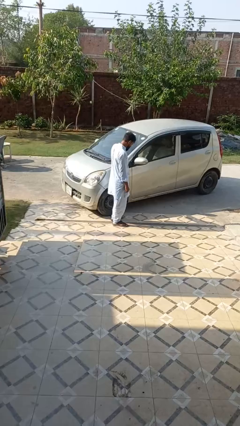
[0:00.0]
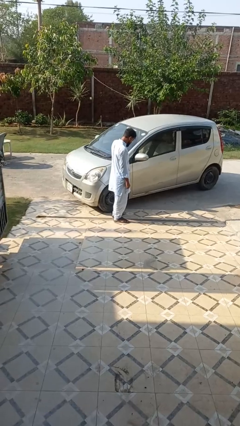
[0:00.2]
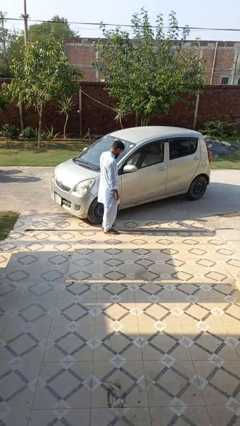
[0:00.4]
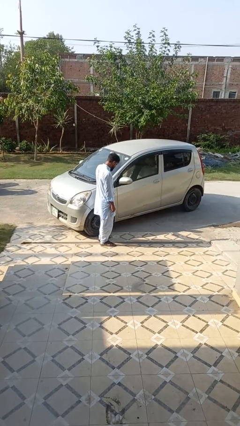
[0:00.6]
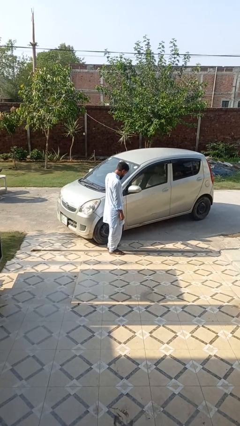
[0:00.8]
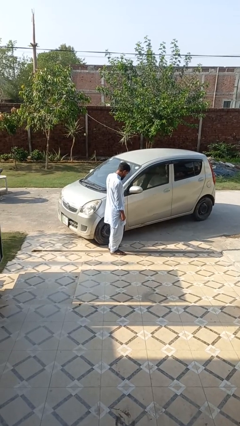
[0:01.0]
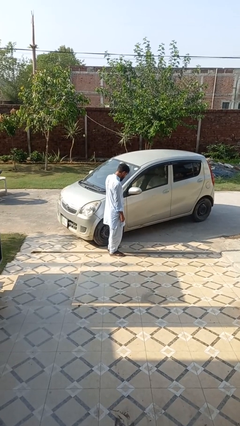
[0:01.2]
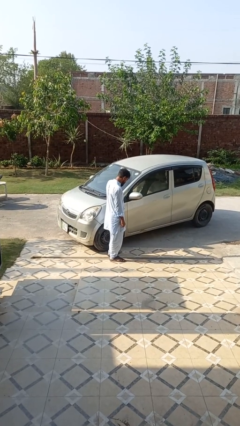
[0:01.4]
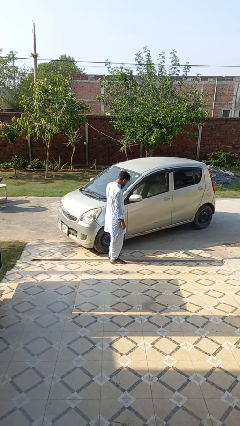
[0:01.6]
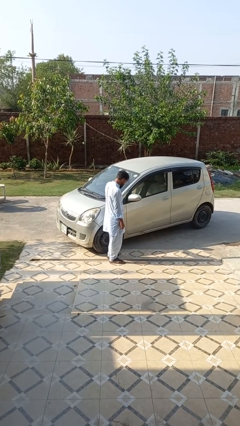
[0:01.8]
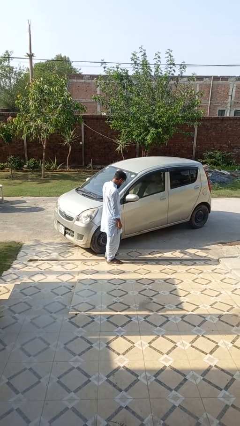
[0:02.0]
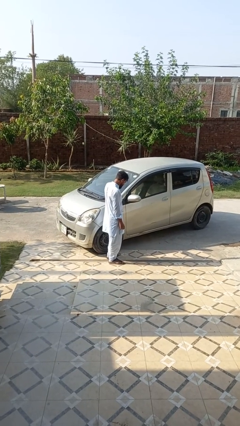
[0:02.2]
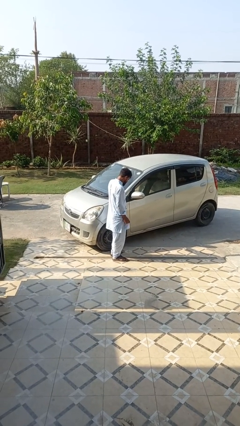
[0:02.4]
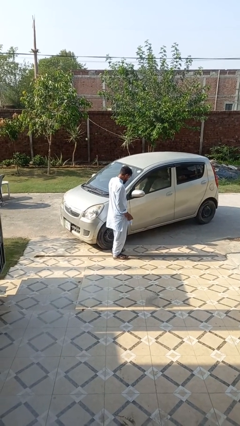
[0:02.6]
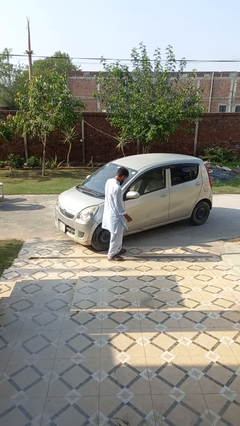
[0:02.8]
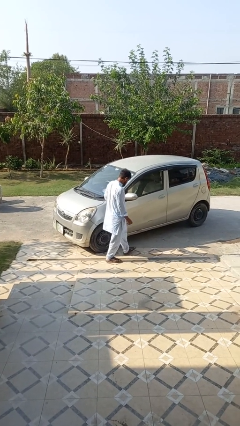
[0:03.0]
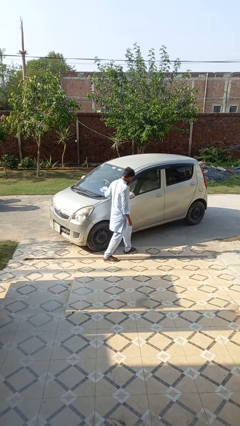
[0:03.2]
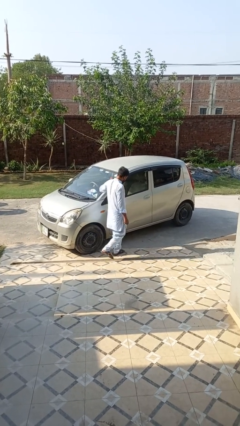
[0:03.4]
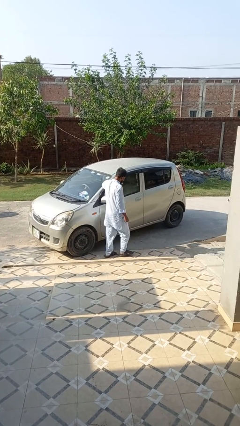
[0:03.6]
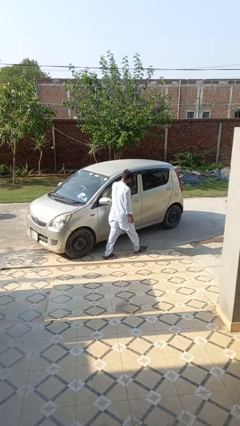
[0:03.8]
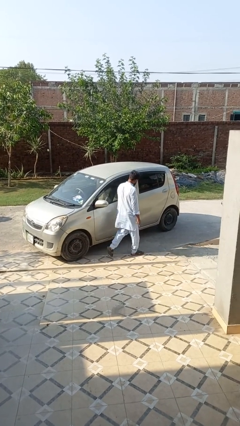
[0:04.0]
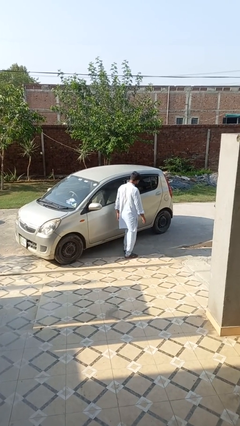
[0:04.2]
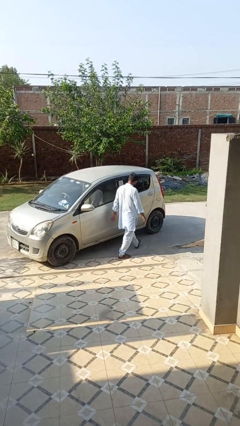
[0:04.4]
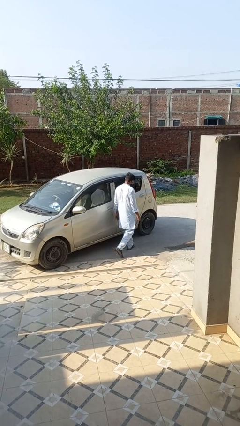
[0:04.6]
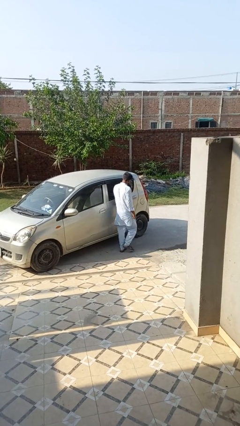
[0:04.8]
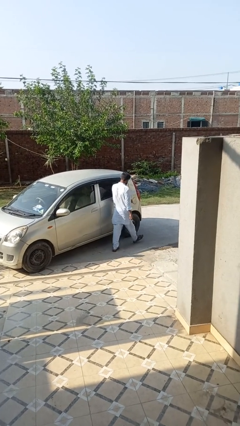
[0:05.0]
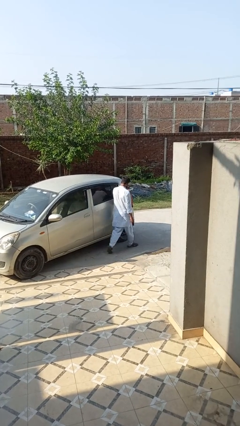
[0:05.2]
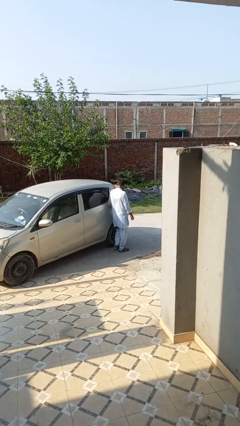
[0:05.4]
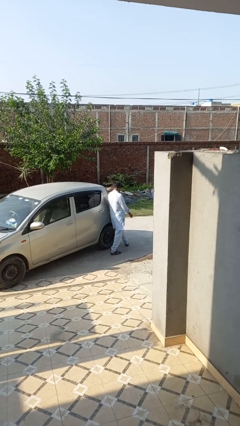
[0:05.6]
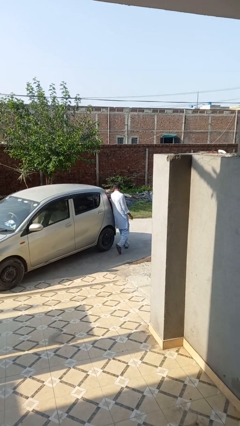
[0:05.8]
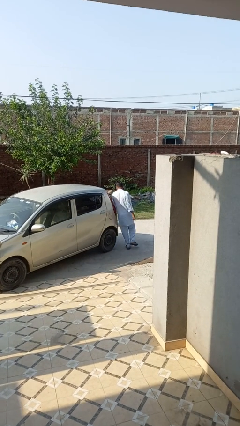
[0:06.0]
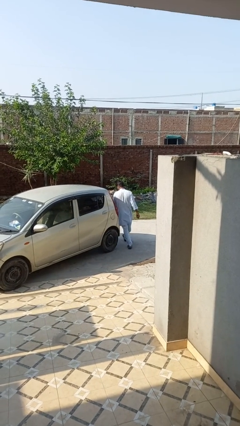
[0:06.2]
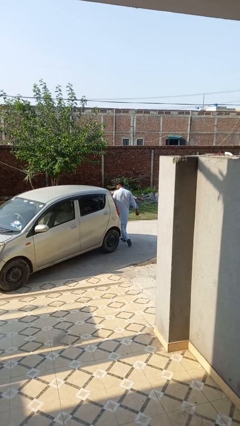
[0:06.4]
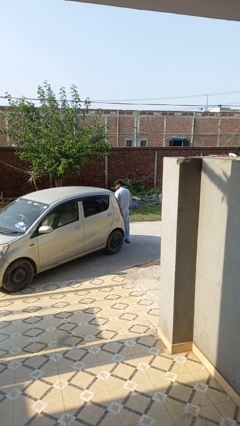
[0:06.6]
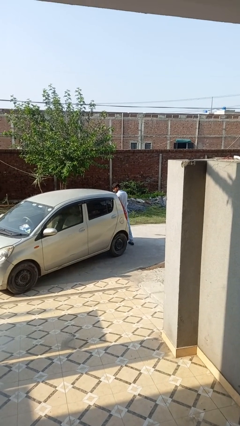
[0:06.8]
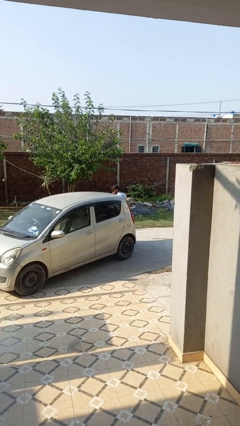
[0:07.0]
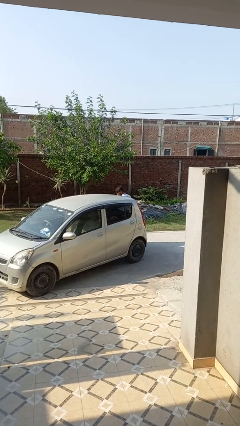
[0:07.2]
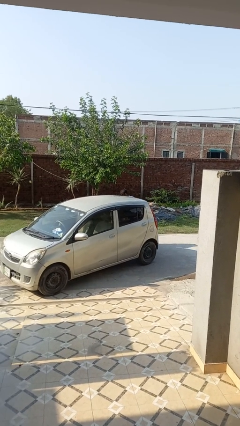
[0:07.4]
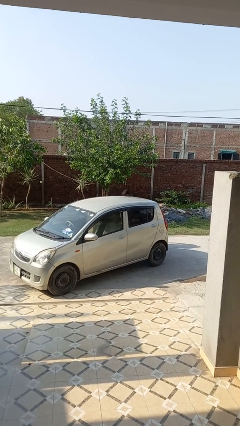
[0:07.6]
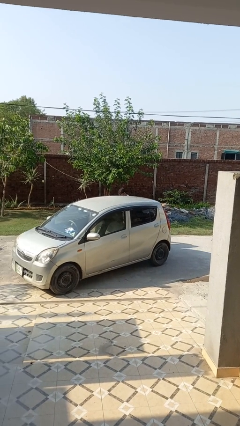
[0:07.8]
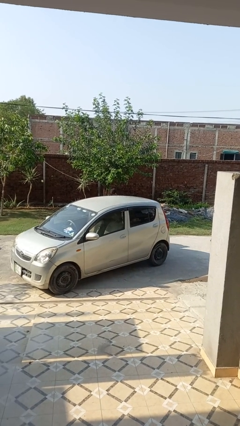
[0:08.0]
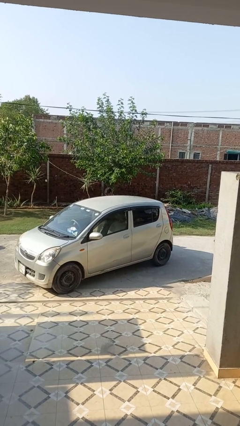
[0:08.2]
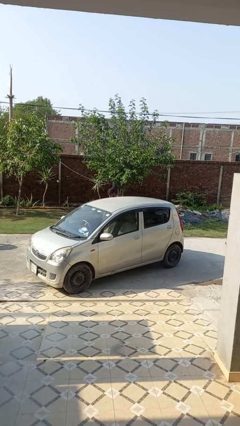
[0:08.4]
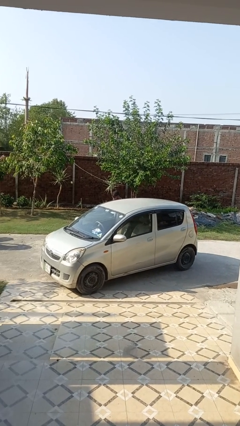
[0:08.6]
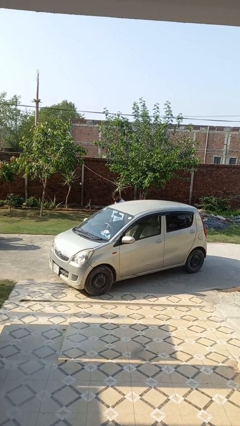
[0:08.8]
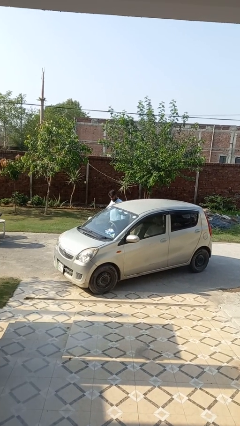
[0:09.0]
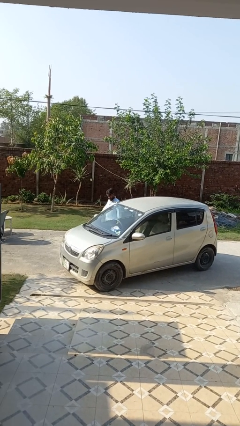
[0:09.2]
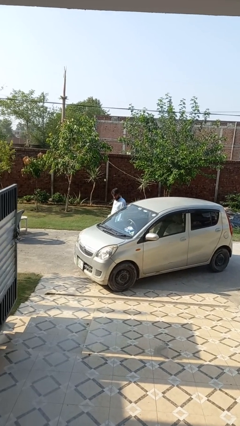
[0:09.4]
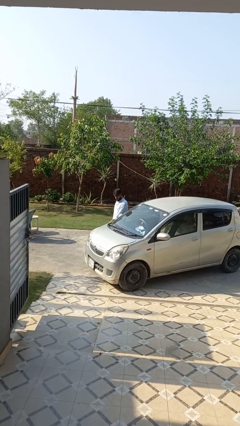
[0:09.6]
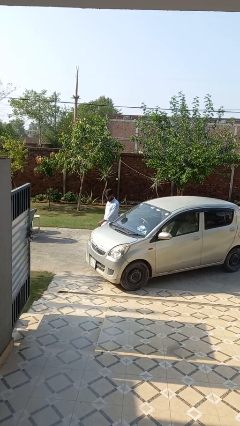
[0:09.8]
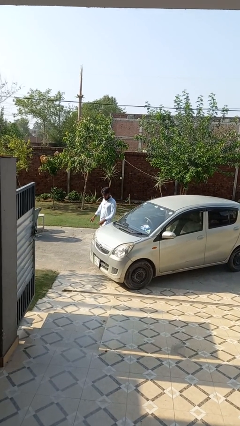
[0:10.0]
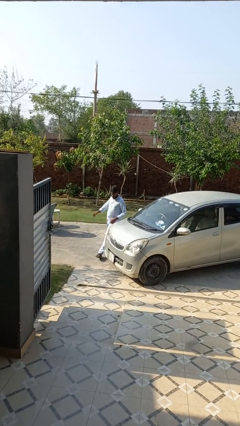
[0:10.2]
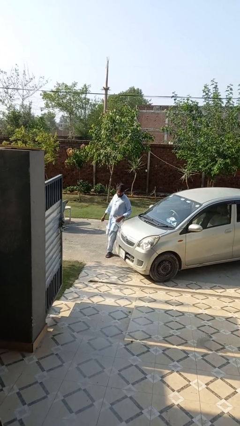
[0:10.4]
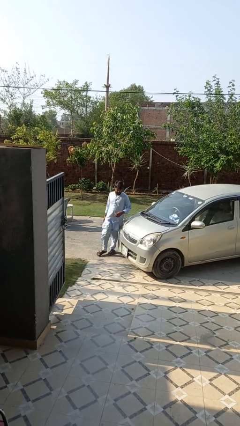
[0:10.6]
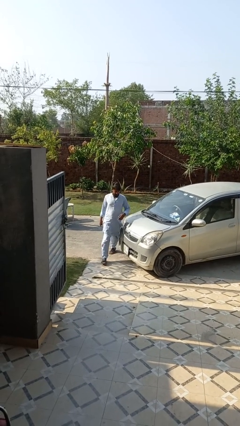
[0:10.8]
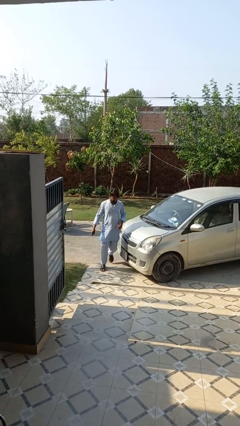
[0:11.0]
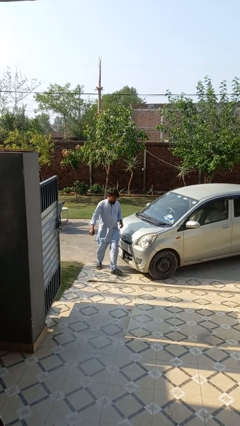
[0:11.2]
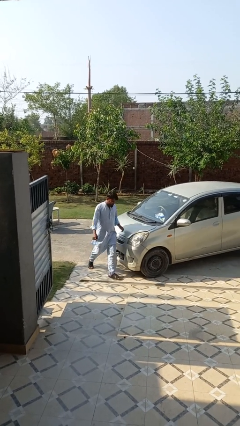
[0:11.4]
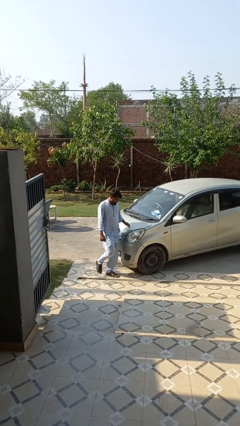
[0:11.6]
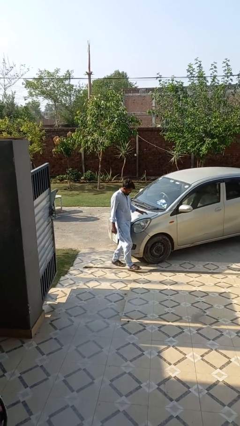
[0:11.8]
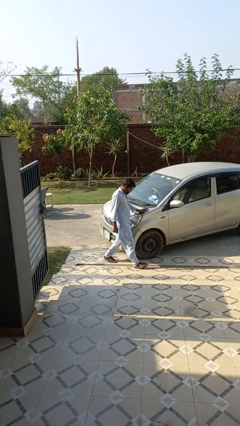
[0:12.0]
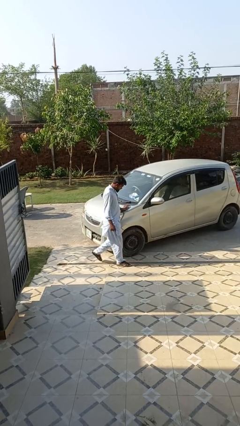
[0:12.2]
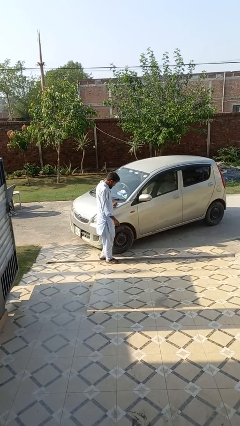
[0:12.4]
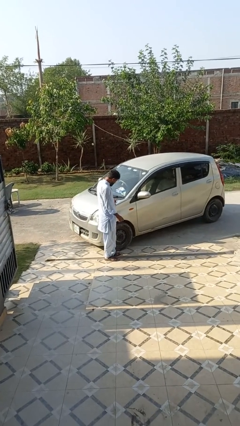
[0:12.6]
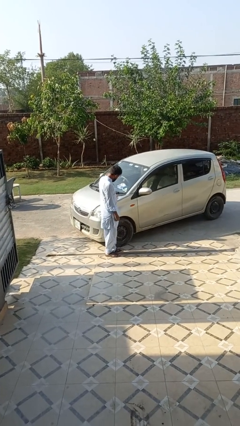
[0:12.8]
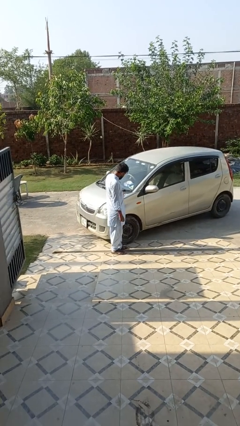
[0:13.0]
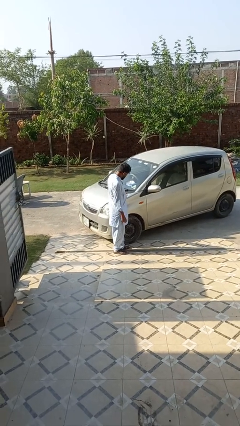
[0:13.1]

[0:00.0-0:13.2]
person walks around car

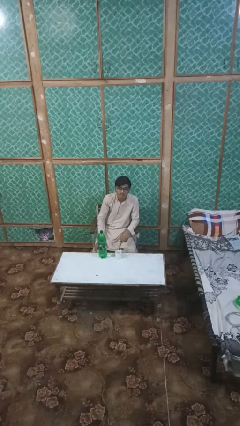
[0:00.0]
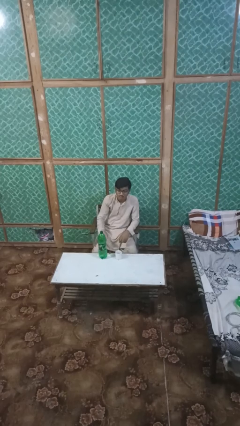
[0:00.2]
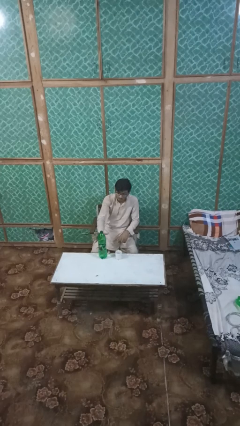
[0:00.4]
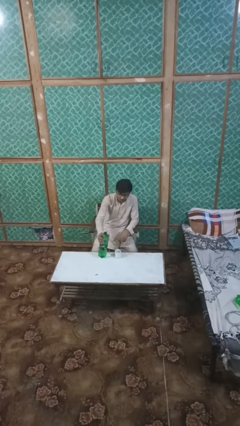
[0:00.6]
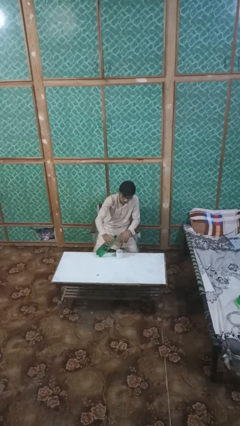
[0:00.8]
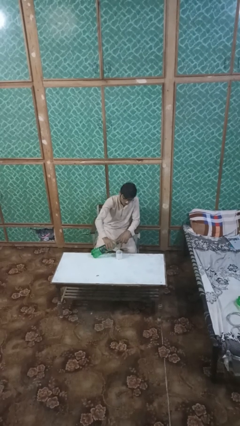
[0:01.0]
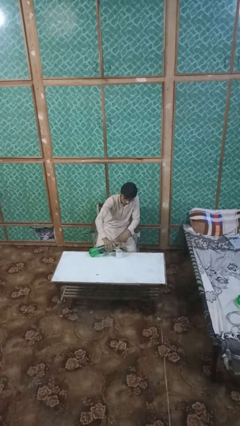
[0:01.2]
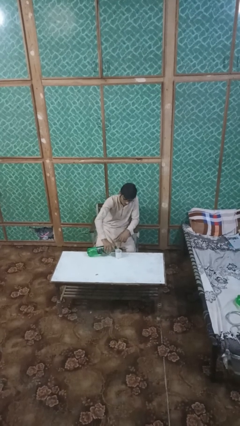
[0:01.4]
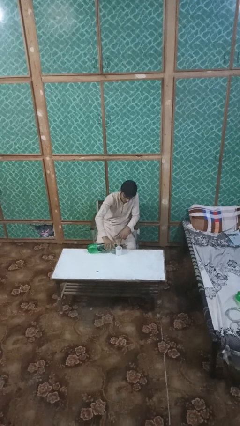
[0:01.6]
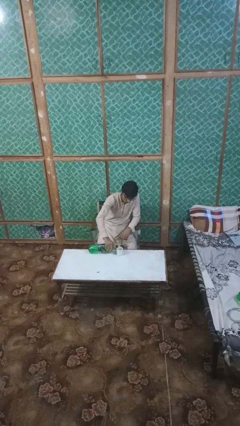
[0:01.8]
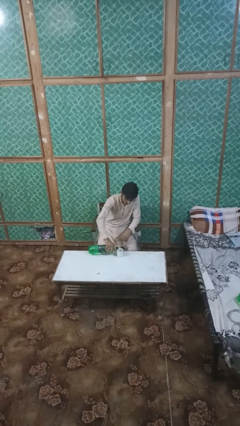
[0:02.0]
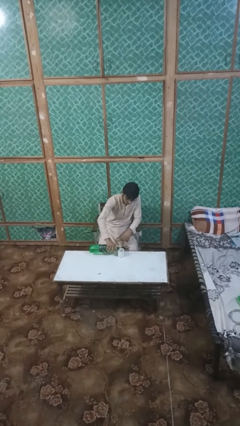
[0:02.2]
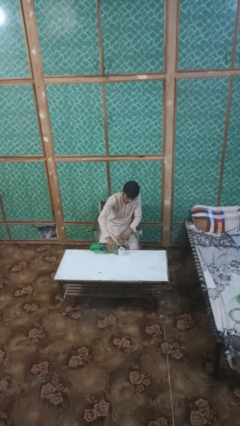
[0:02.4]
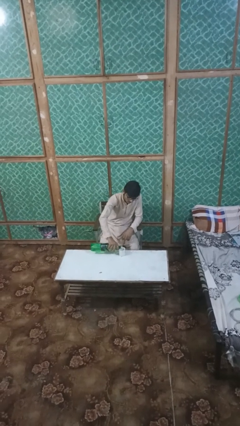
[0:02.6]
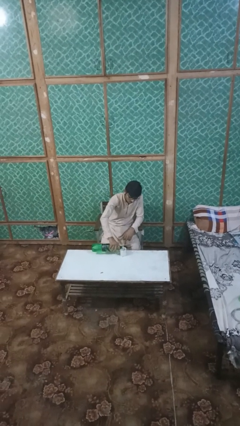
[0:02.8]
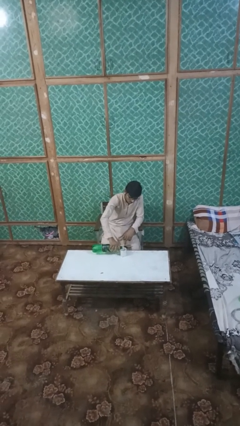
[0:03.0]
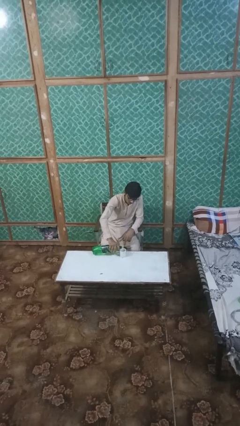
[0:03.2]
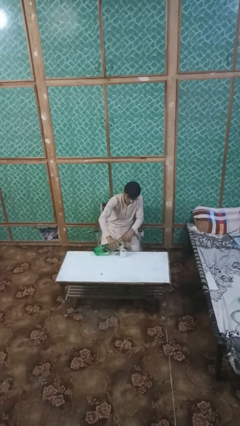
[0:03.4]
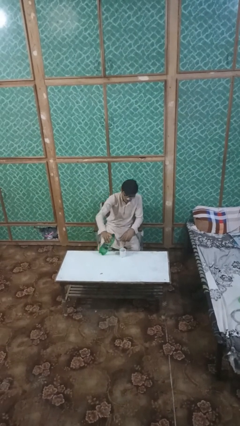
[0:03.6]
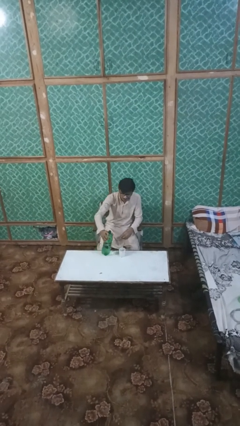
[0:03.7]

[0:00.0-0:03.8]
person pours liquid into cup

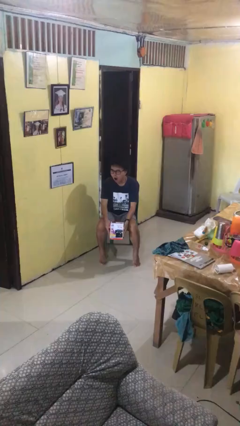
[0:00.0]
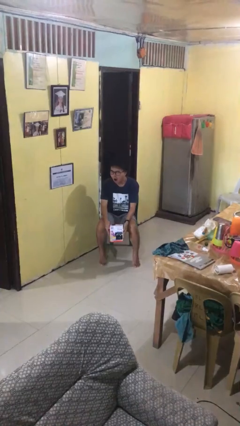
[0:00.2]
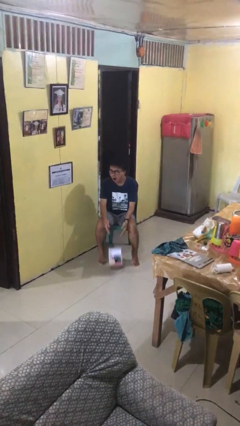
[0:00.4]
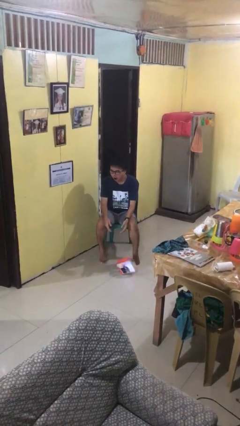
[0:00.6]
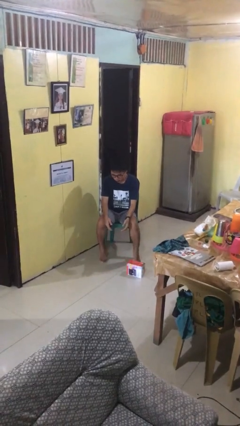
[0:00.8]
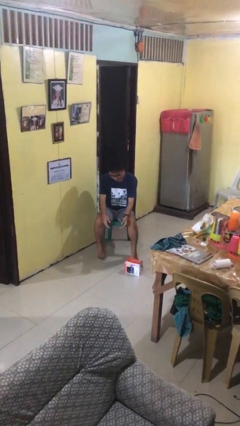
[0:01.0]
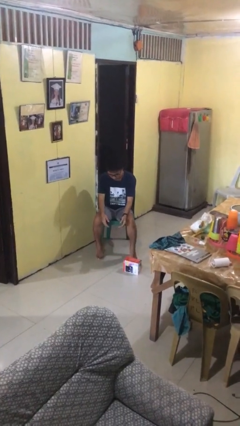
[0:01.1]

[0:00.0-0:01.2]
person drops object
